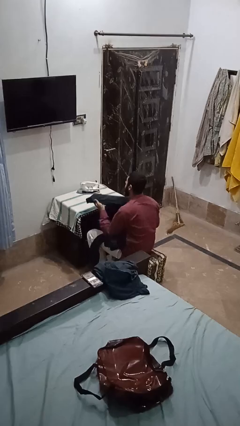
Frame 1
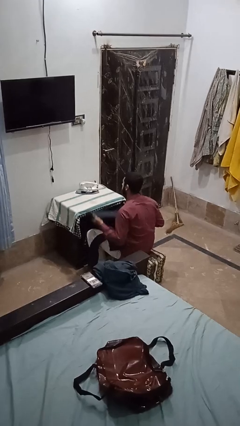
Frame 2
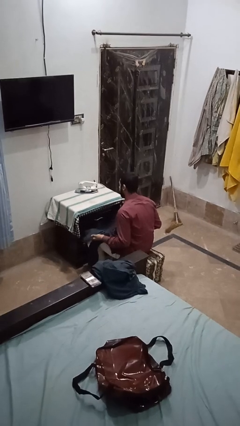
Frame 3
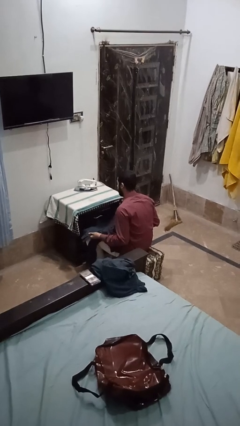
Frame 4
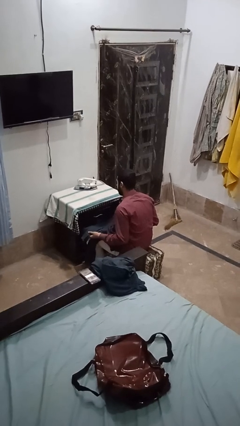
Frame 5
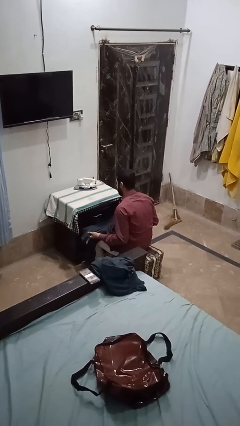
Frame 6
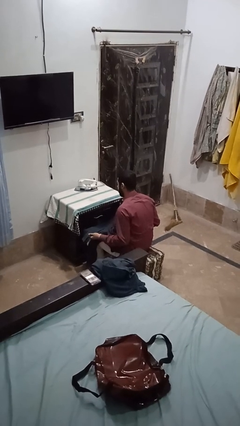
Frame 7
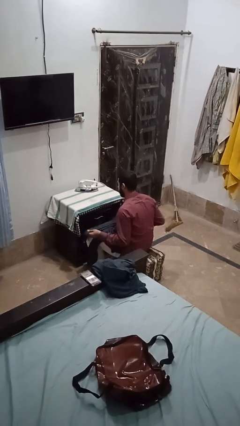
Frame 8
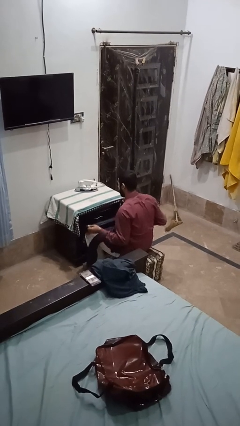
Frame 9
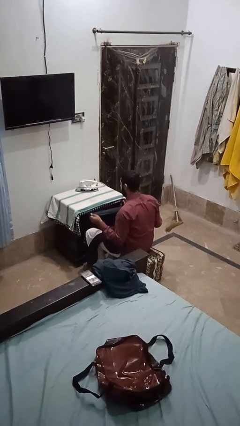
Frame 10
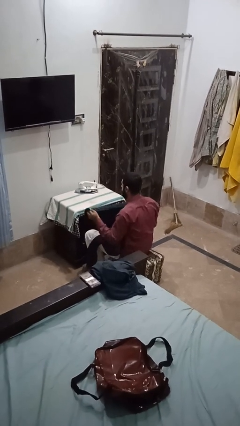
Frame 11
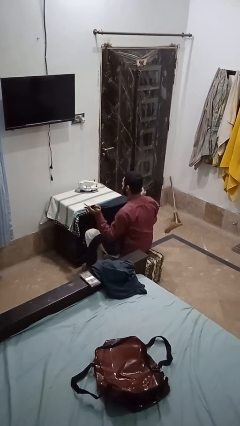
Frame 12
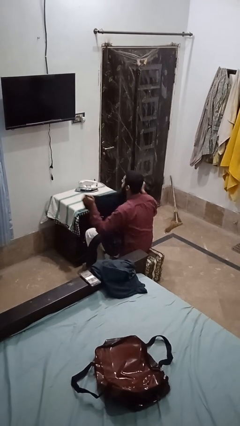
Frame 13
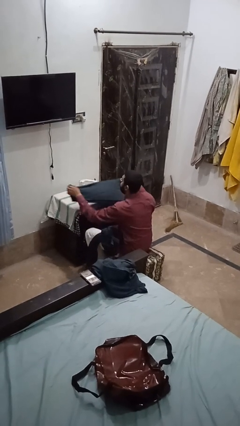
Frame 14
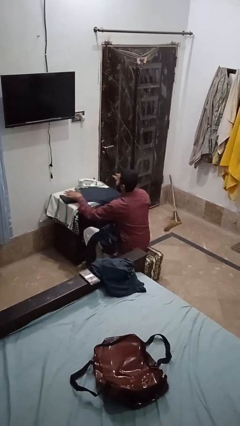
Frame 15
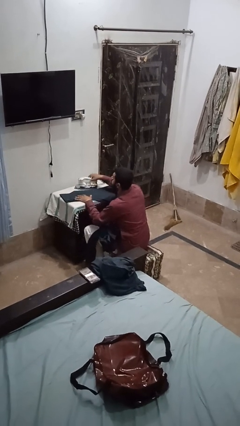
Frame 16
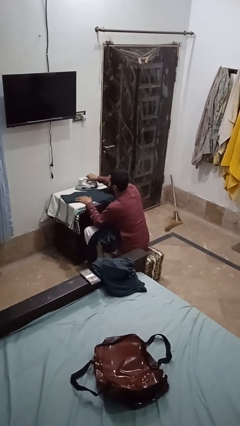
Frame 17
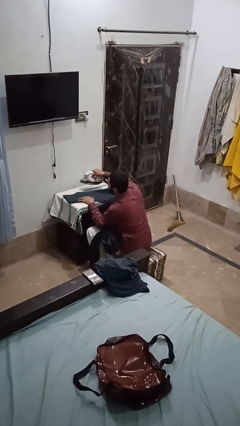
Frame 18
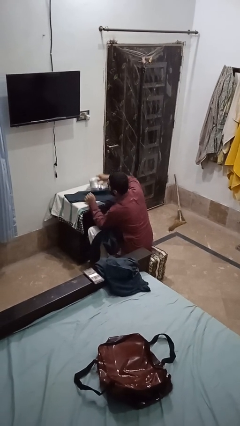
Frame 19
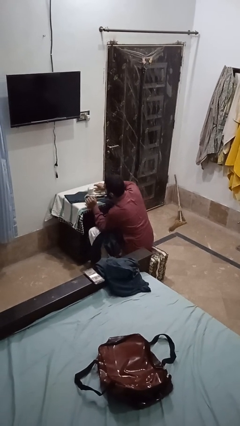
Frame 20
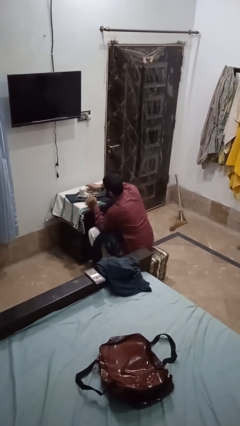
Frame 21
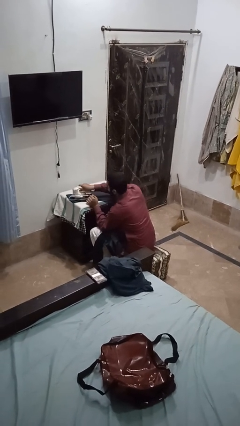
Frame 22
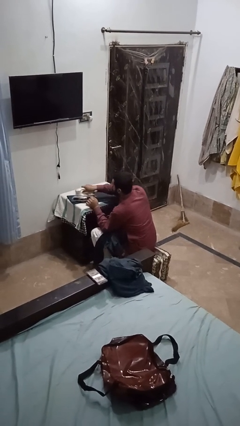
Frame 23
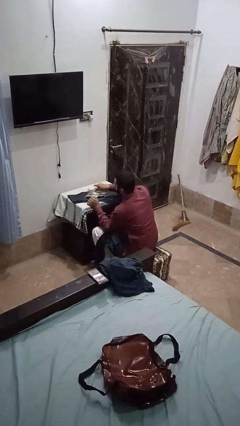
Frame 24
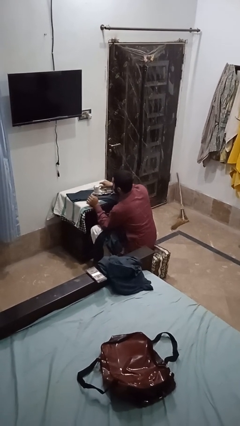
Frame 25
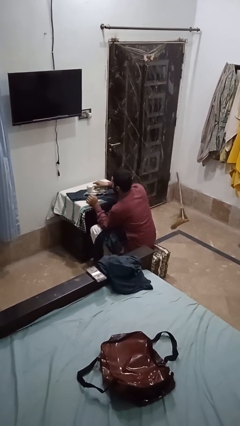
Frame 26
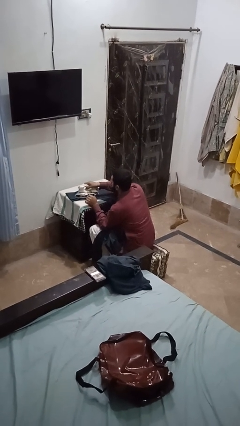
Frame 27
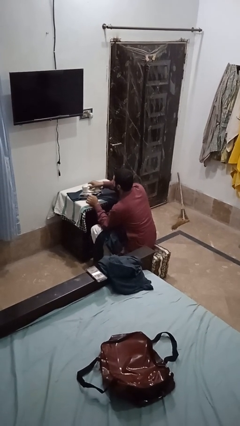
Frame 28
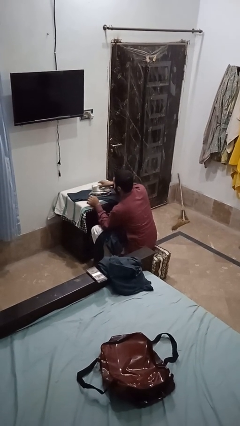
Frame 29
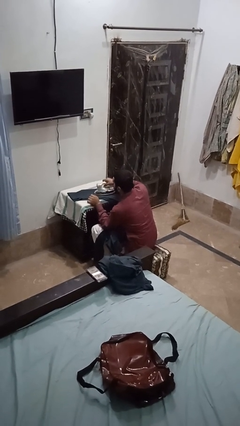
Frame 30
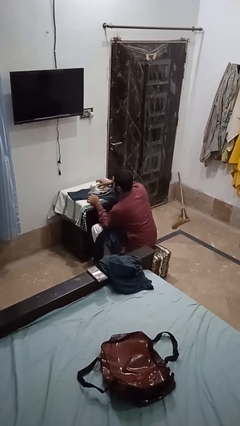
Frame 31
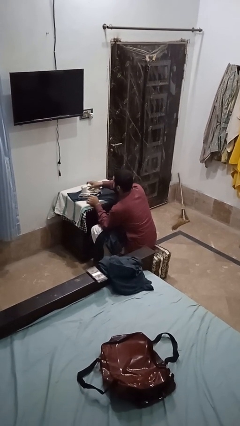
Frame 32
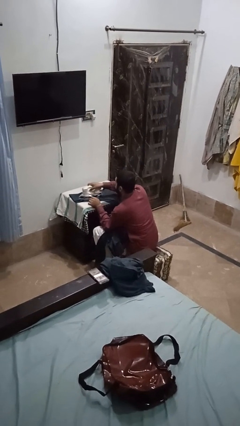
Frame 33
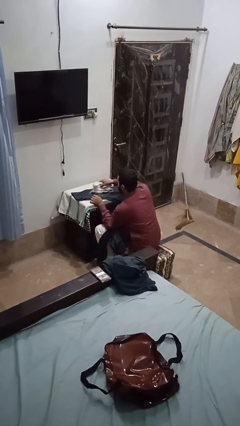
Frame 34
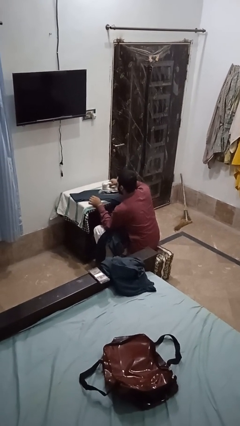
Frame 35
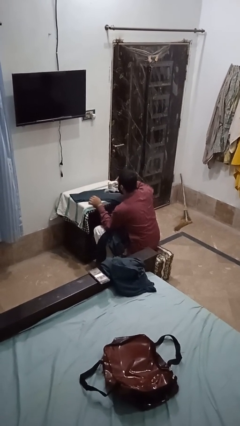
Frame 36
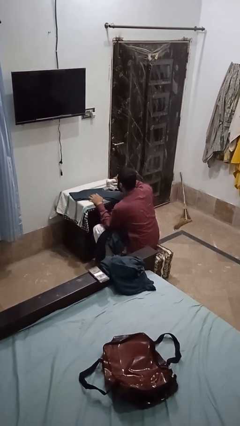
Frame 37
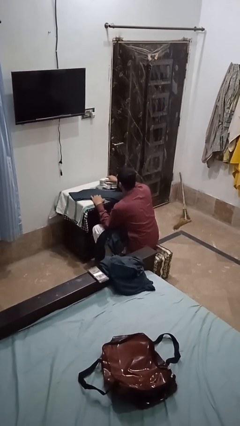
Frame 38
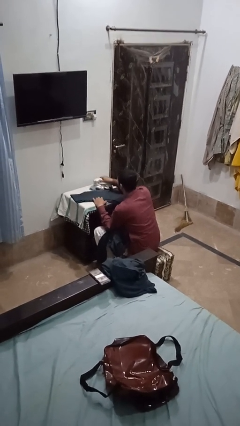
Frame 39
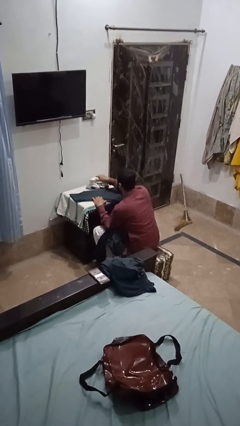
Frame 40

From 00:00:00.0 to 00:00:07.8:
person irons clothes

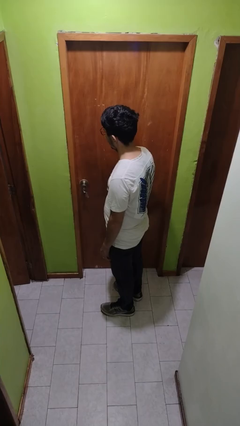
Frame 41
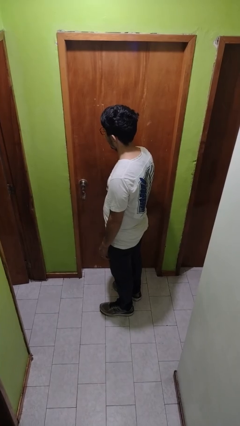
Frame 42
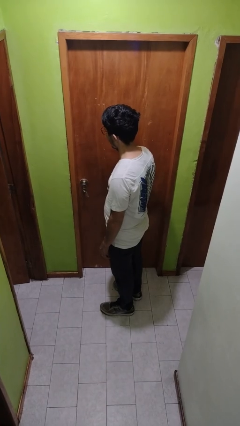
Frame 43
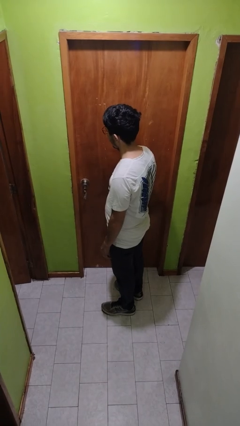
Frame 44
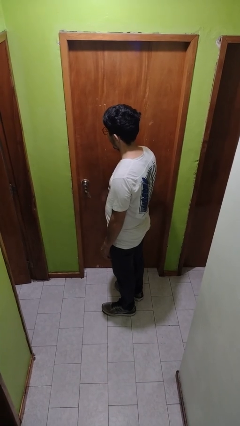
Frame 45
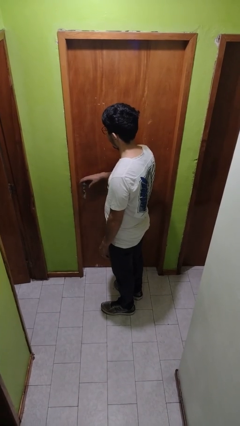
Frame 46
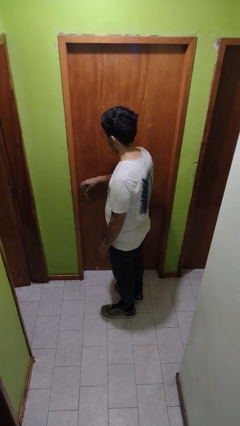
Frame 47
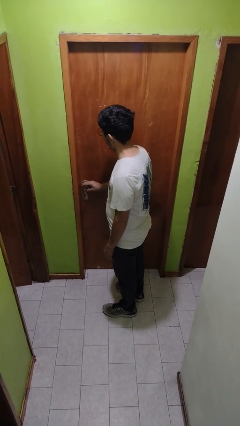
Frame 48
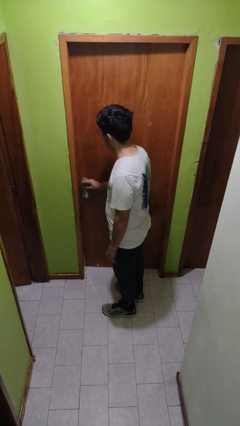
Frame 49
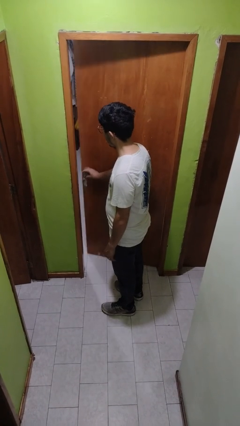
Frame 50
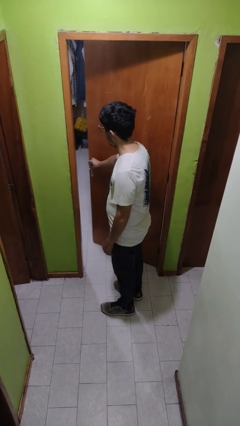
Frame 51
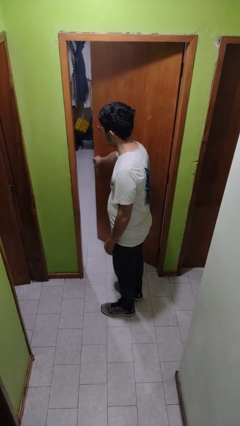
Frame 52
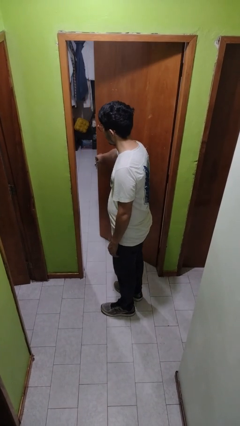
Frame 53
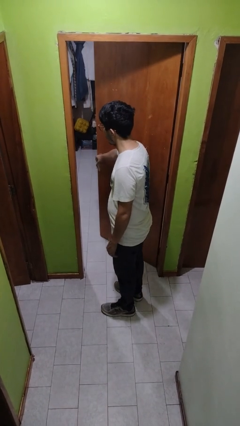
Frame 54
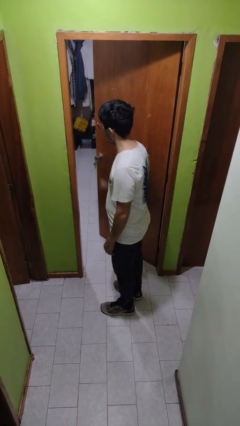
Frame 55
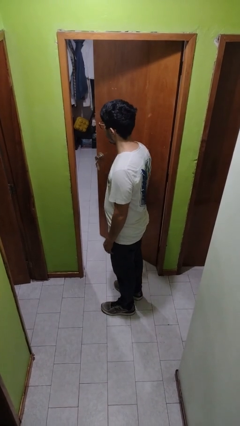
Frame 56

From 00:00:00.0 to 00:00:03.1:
person opens facility door

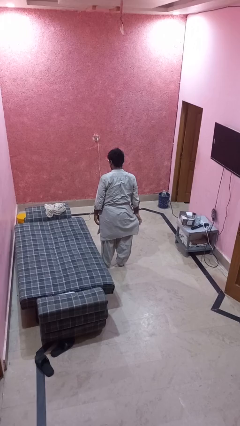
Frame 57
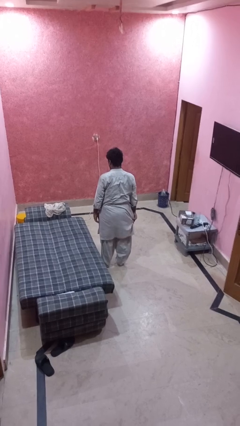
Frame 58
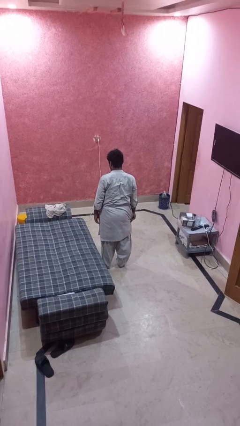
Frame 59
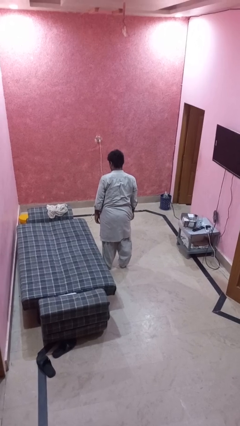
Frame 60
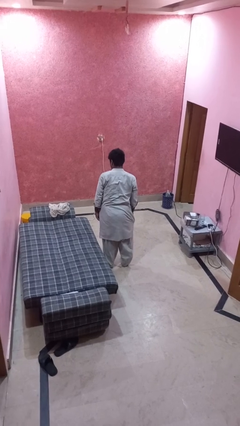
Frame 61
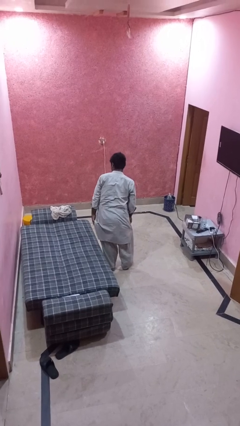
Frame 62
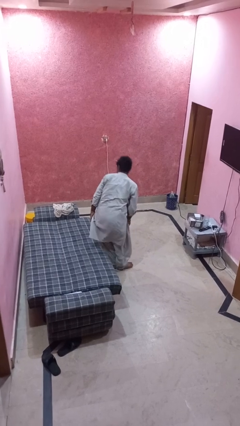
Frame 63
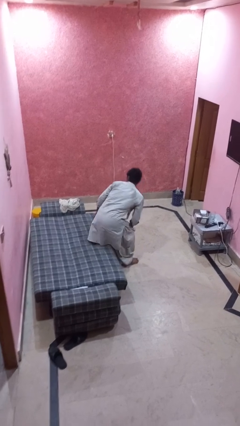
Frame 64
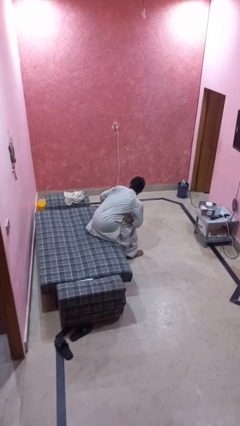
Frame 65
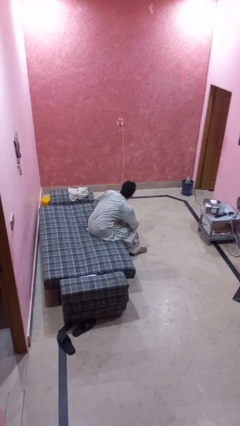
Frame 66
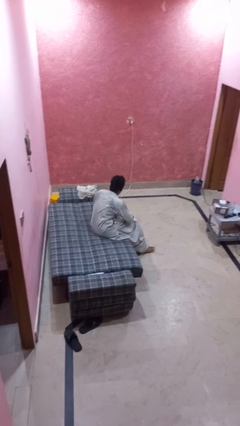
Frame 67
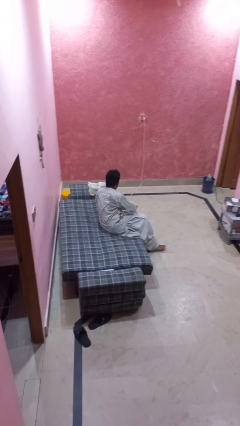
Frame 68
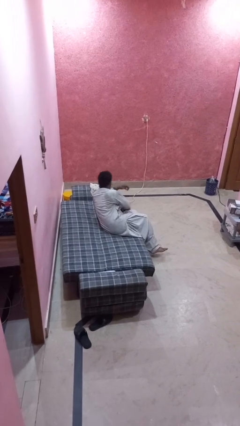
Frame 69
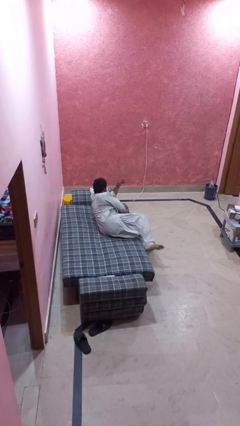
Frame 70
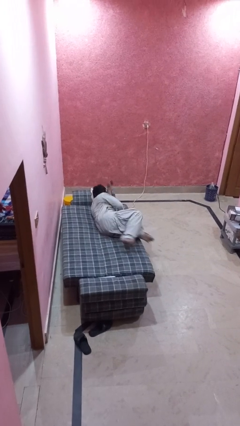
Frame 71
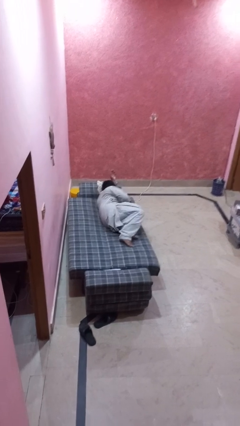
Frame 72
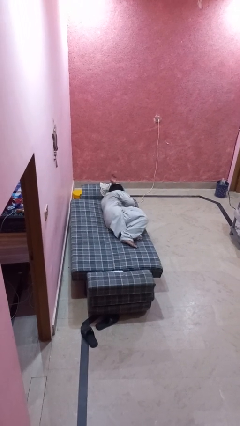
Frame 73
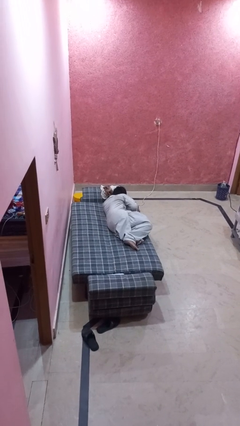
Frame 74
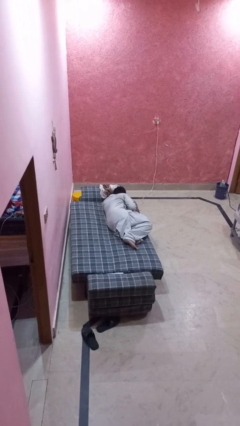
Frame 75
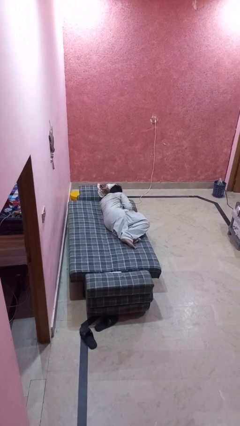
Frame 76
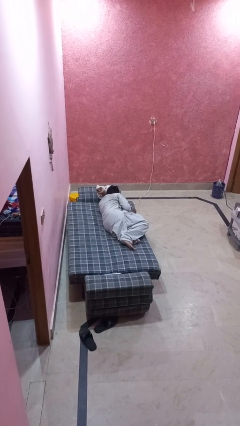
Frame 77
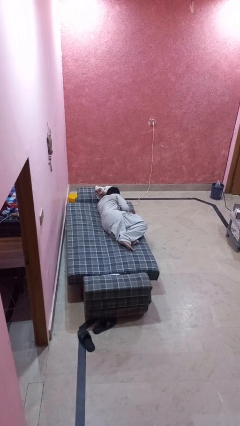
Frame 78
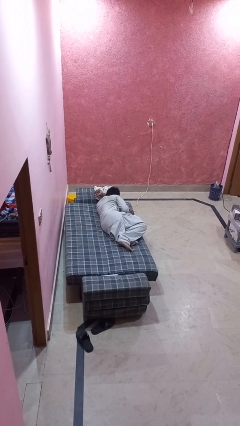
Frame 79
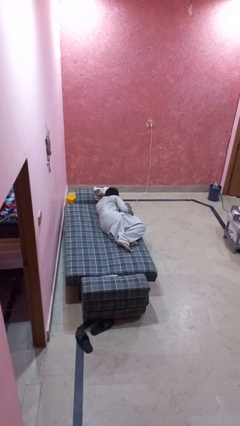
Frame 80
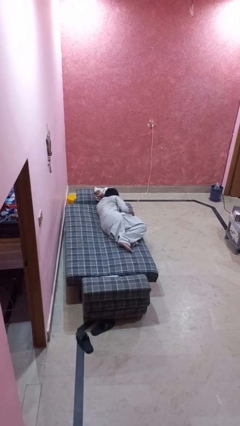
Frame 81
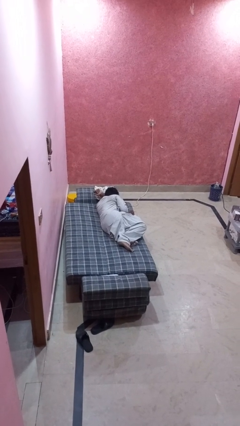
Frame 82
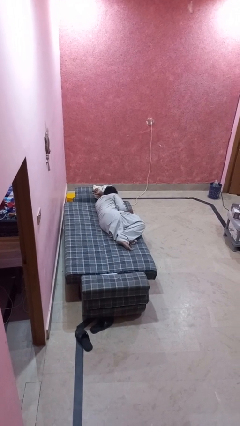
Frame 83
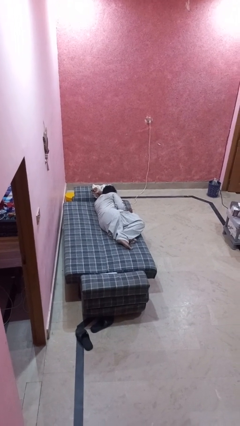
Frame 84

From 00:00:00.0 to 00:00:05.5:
person lies down on bed

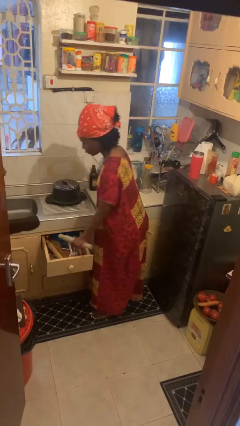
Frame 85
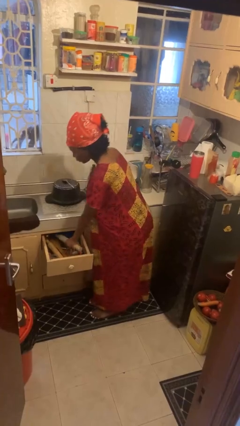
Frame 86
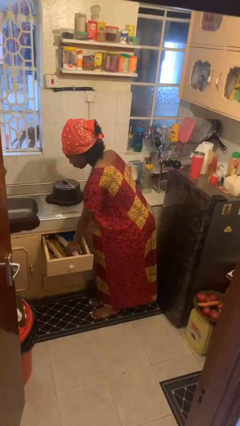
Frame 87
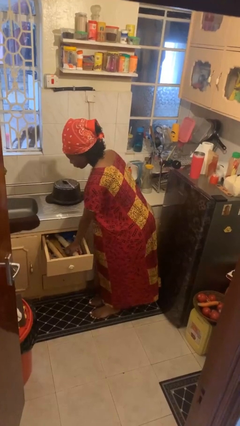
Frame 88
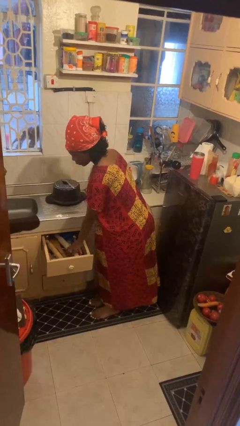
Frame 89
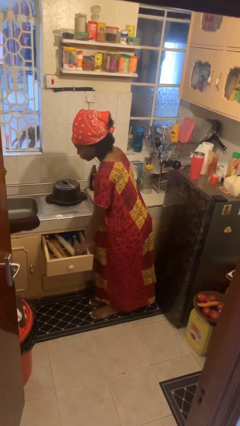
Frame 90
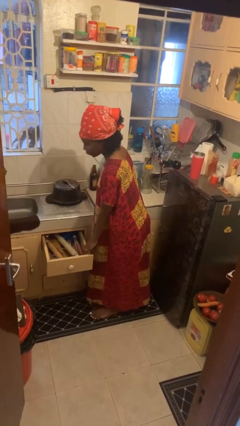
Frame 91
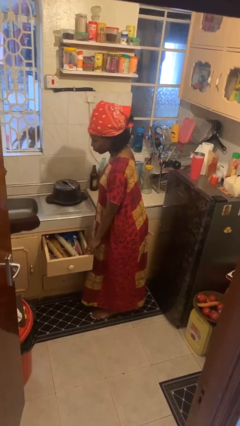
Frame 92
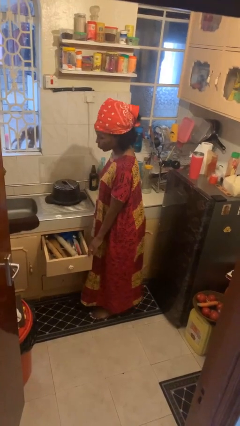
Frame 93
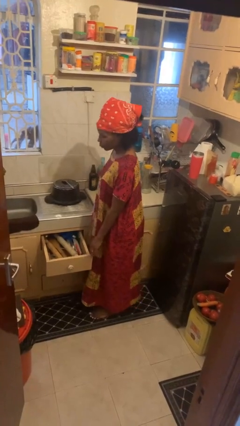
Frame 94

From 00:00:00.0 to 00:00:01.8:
person puts object into kitchen drawer
